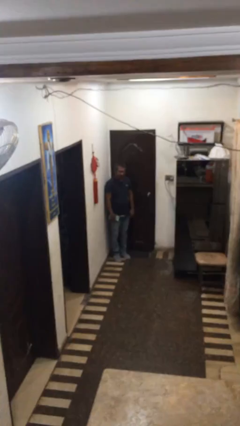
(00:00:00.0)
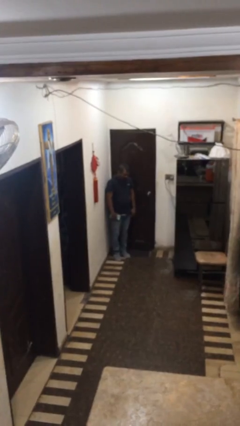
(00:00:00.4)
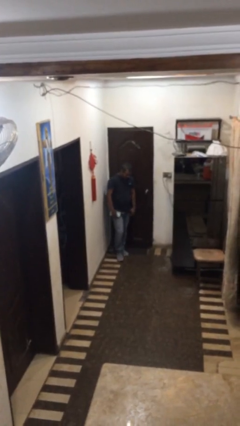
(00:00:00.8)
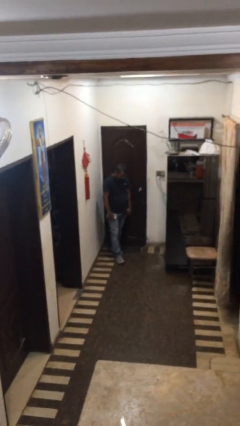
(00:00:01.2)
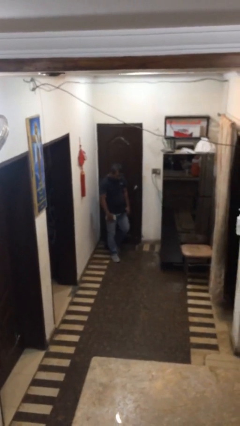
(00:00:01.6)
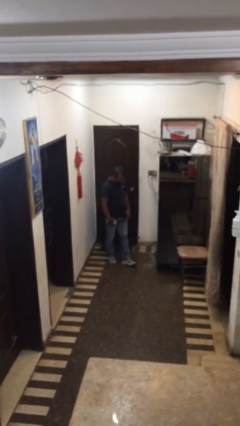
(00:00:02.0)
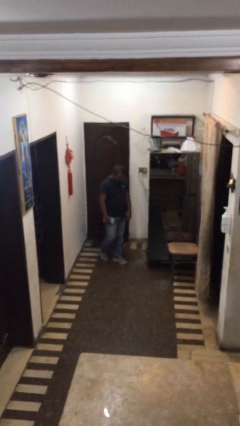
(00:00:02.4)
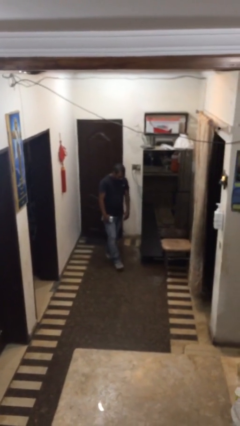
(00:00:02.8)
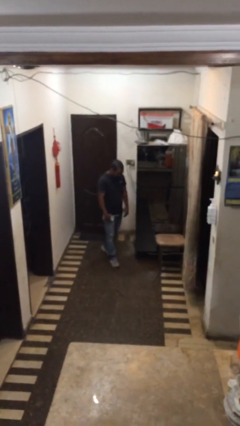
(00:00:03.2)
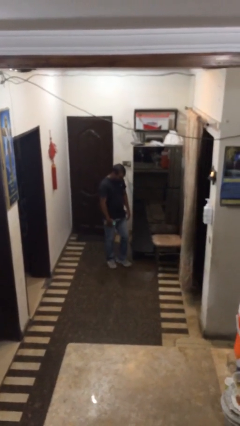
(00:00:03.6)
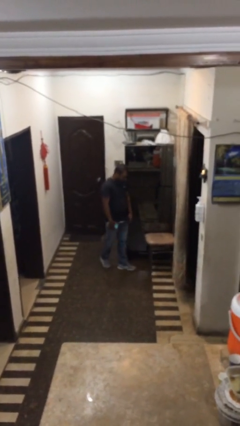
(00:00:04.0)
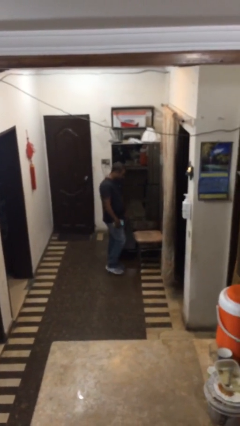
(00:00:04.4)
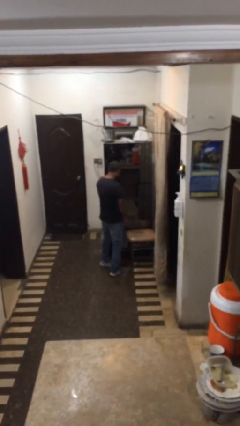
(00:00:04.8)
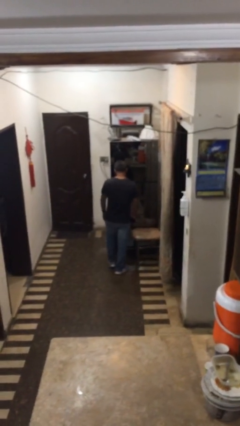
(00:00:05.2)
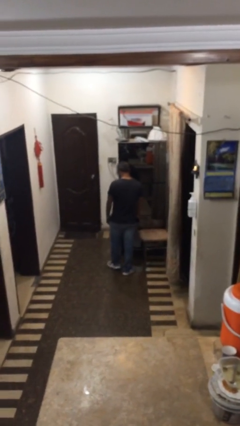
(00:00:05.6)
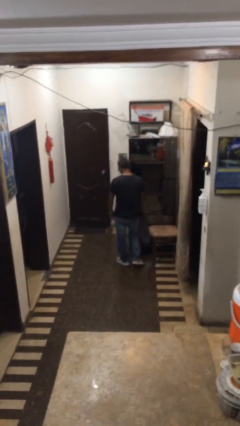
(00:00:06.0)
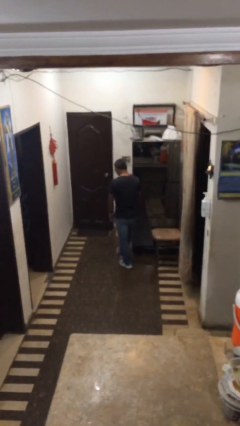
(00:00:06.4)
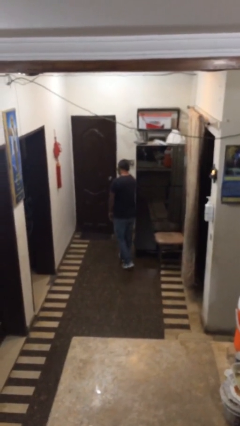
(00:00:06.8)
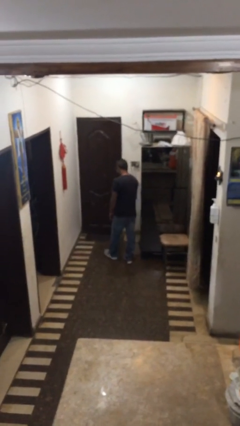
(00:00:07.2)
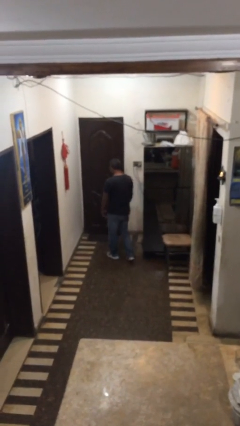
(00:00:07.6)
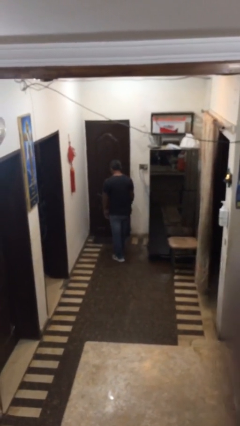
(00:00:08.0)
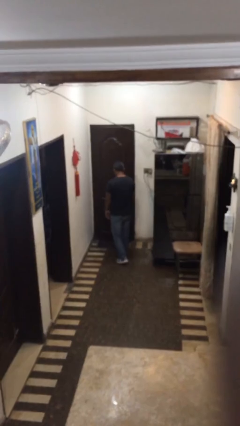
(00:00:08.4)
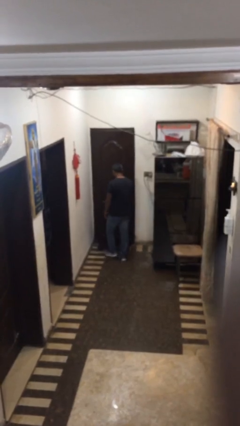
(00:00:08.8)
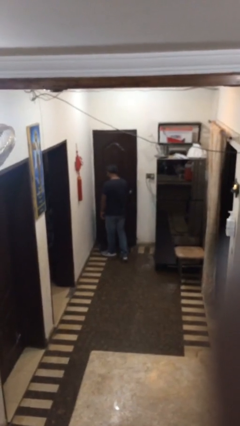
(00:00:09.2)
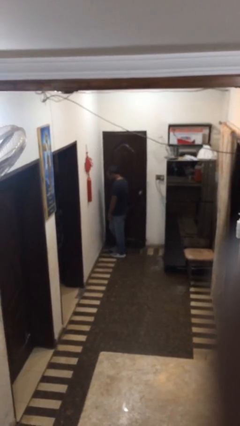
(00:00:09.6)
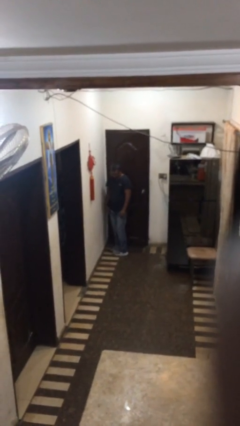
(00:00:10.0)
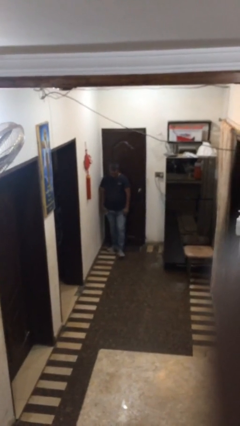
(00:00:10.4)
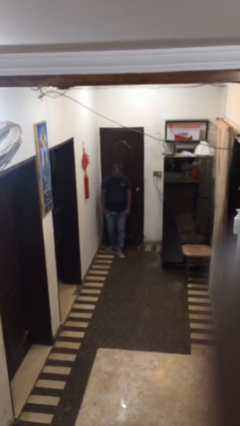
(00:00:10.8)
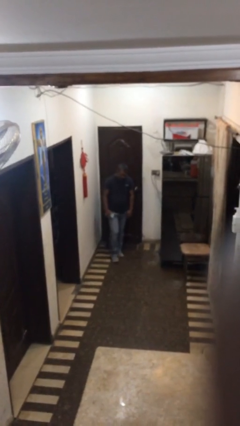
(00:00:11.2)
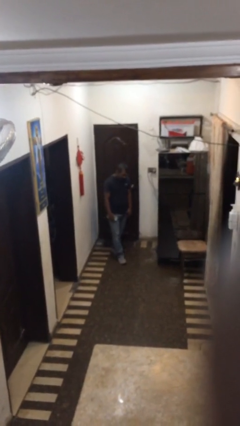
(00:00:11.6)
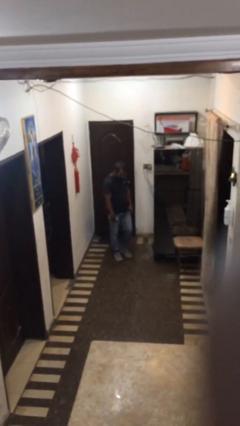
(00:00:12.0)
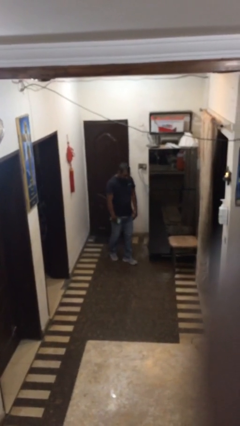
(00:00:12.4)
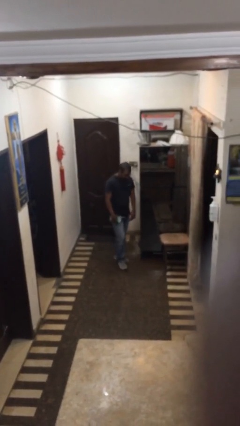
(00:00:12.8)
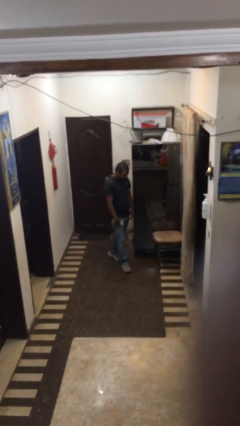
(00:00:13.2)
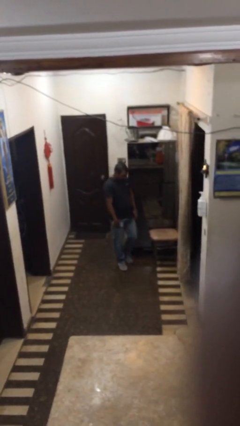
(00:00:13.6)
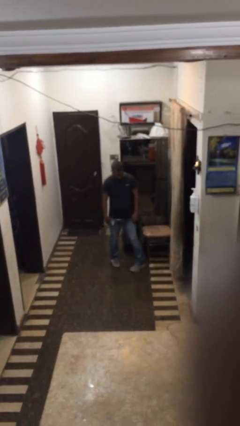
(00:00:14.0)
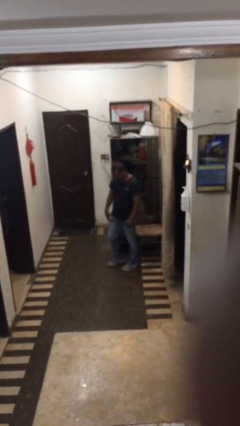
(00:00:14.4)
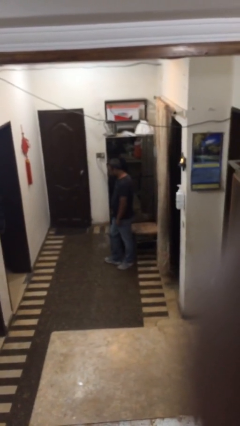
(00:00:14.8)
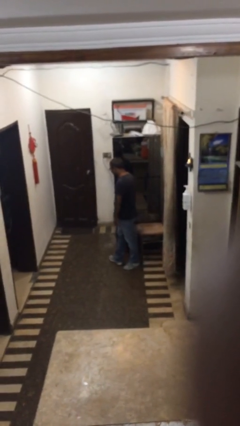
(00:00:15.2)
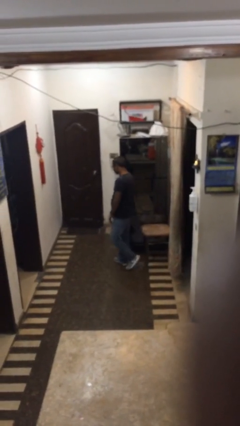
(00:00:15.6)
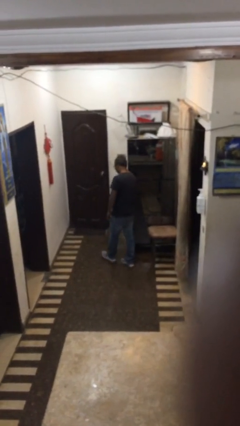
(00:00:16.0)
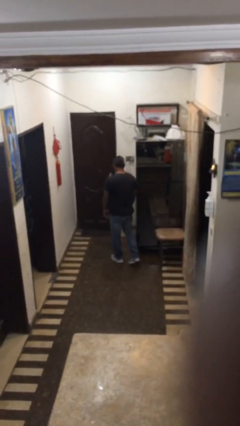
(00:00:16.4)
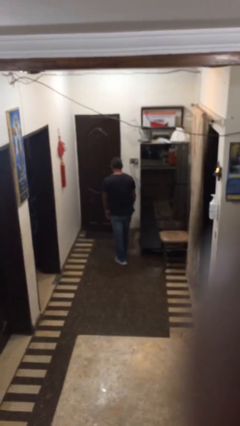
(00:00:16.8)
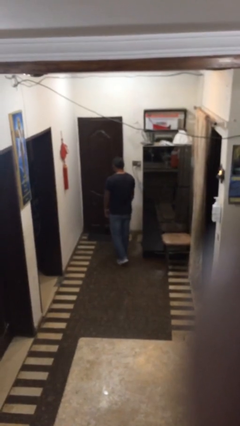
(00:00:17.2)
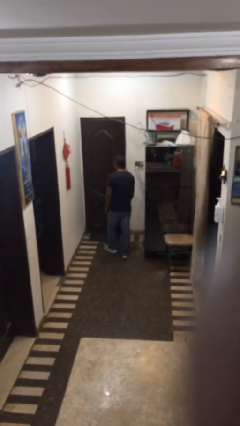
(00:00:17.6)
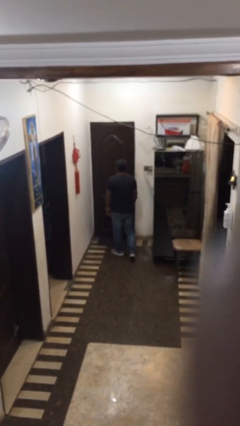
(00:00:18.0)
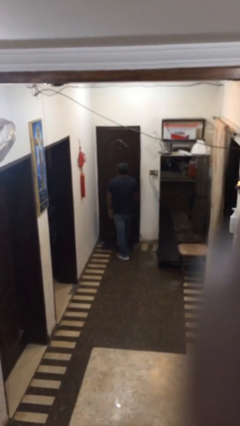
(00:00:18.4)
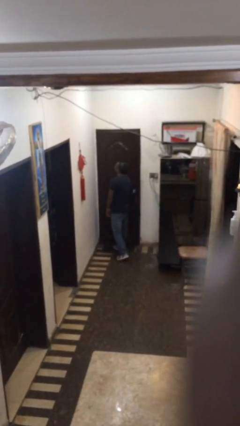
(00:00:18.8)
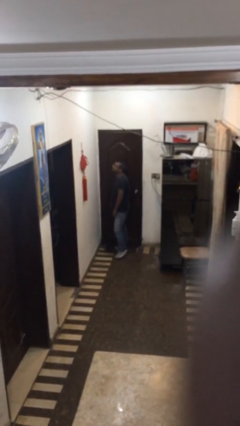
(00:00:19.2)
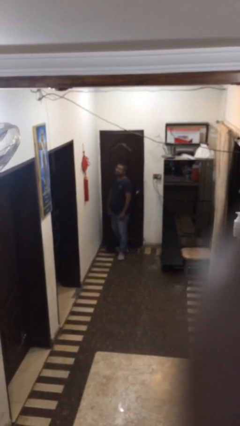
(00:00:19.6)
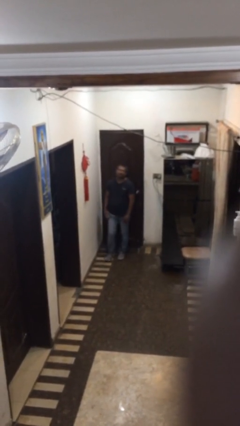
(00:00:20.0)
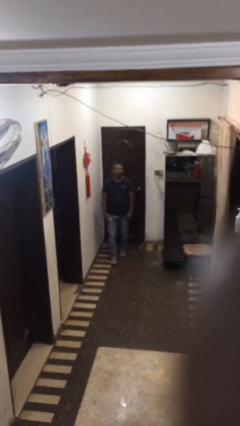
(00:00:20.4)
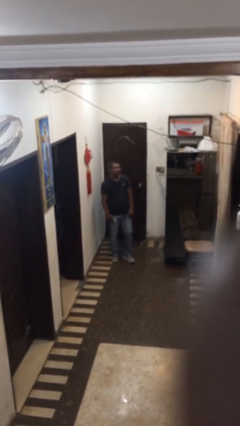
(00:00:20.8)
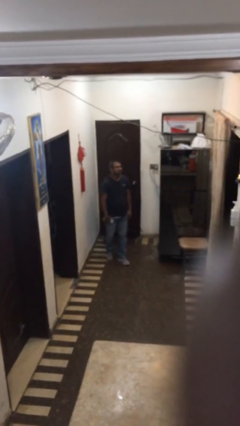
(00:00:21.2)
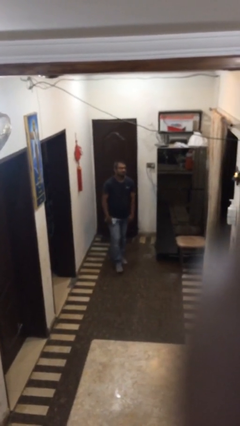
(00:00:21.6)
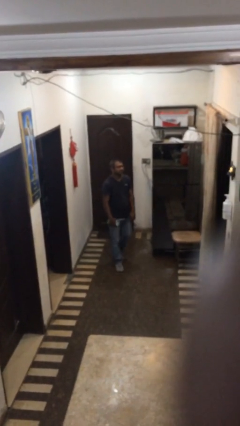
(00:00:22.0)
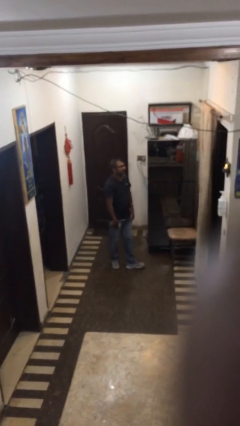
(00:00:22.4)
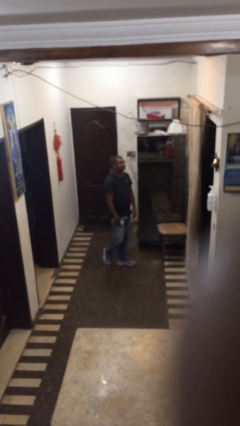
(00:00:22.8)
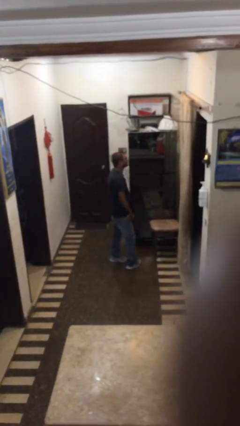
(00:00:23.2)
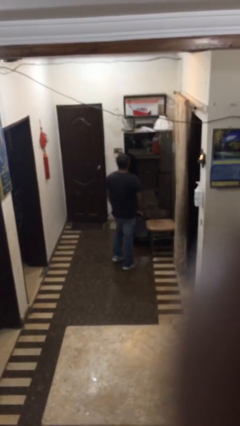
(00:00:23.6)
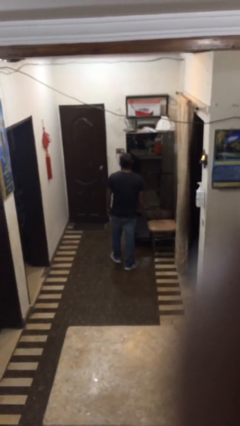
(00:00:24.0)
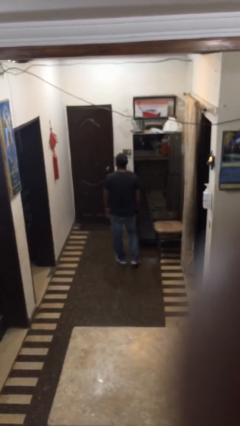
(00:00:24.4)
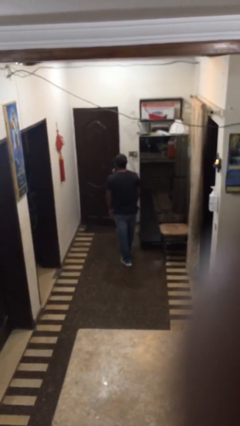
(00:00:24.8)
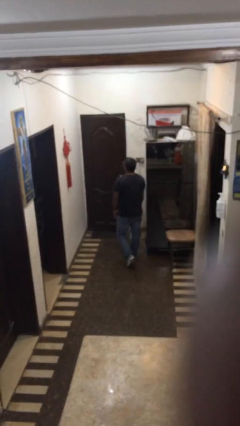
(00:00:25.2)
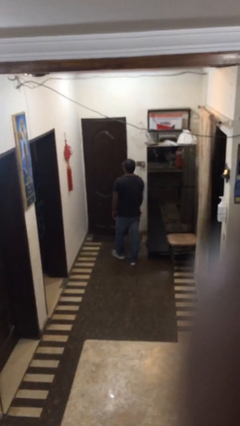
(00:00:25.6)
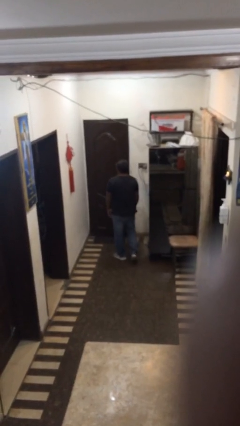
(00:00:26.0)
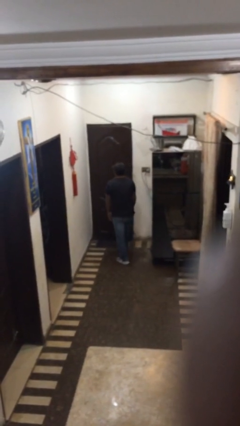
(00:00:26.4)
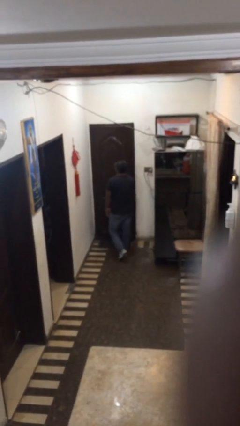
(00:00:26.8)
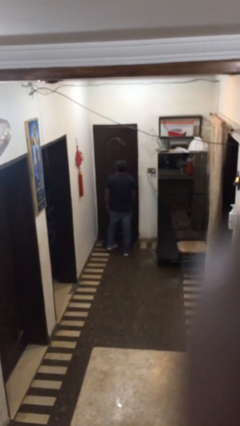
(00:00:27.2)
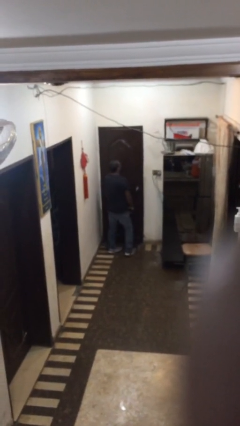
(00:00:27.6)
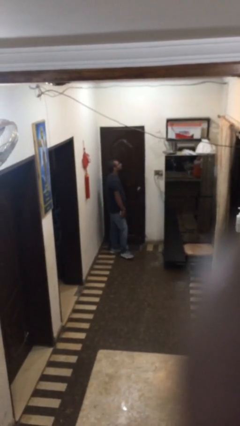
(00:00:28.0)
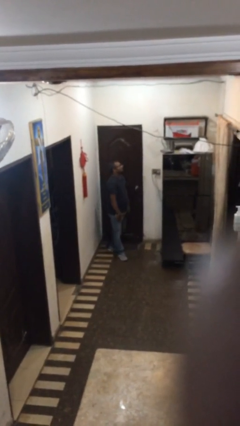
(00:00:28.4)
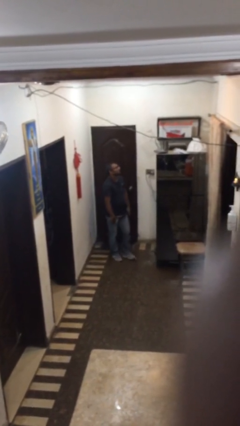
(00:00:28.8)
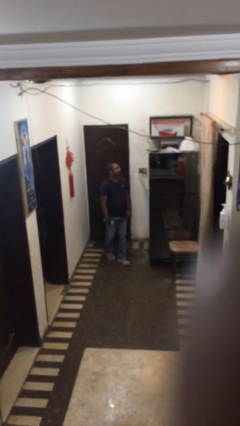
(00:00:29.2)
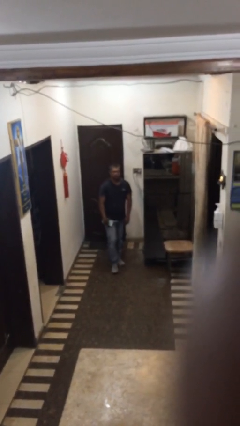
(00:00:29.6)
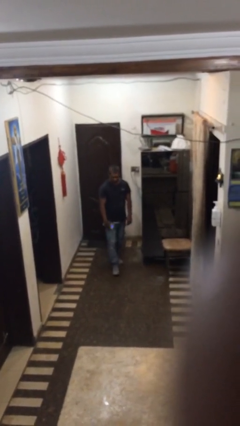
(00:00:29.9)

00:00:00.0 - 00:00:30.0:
person walks

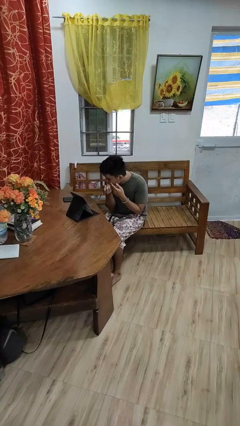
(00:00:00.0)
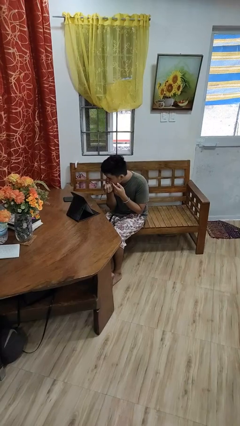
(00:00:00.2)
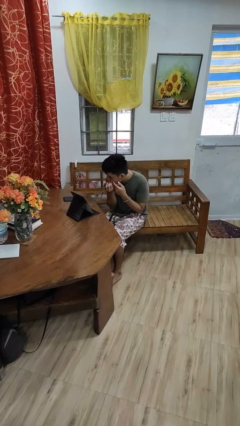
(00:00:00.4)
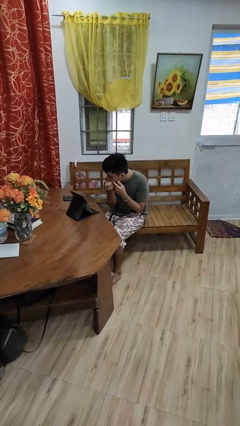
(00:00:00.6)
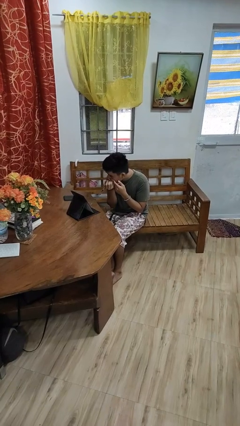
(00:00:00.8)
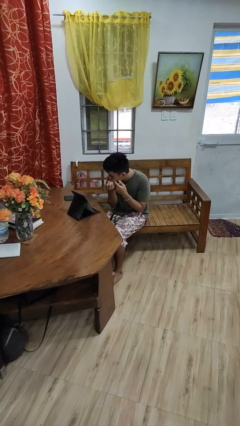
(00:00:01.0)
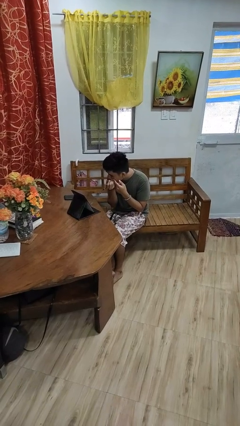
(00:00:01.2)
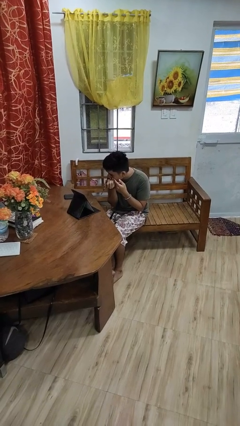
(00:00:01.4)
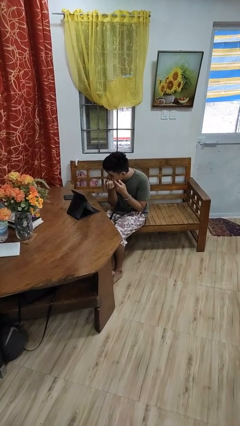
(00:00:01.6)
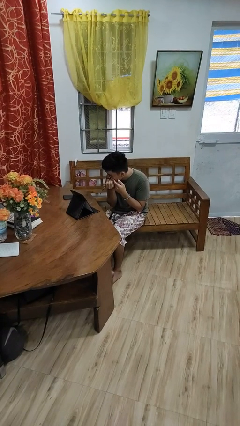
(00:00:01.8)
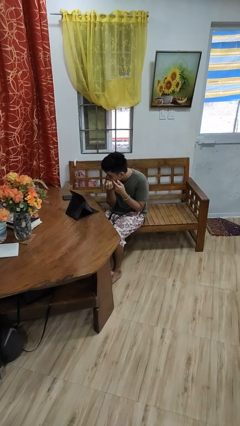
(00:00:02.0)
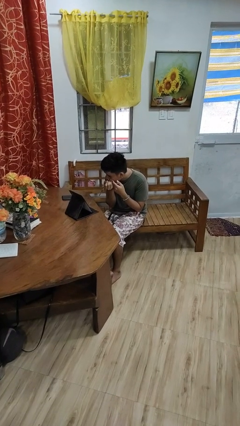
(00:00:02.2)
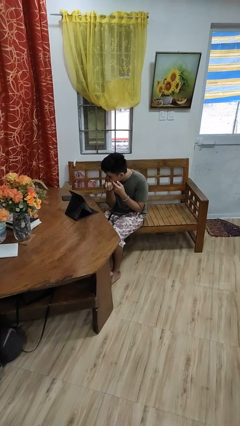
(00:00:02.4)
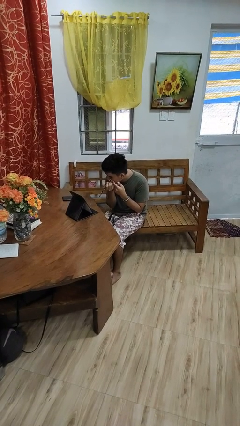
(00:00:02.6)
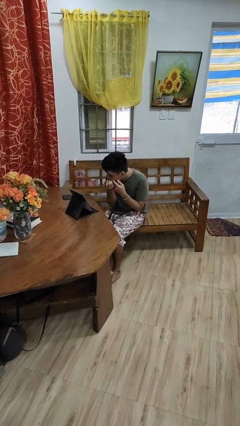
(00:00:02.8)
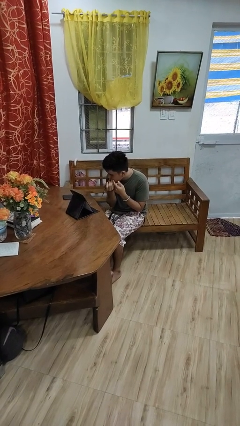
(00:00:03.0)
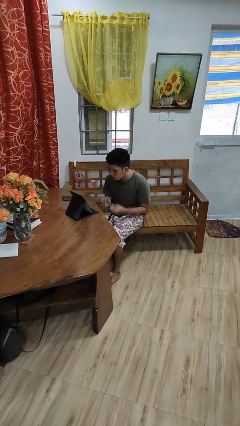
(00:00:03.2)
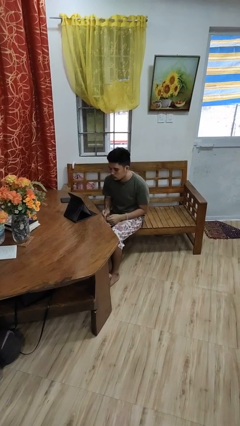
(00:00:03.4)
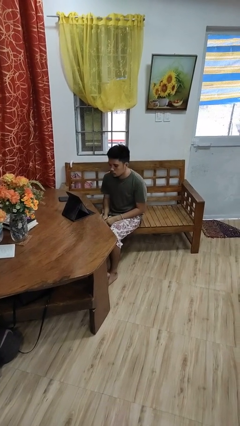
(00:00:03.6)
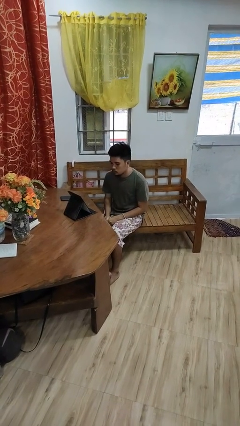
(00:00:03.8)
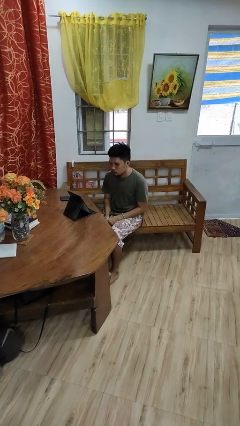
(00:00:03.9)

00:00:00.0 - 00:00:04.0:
person applies eye makeup
